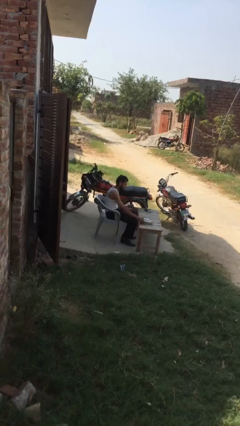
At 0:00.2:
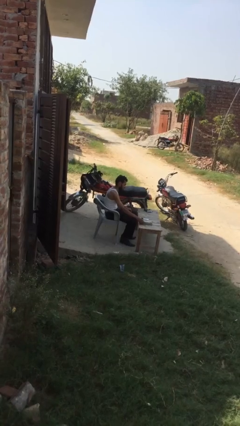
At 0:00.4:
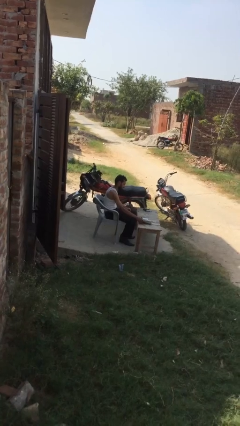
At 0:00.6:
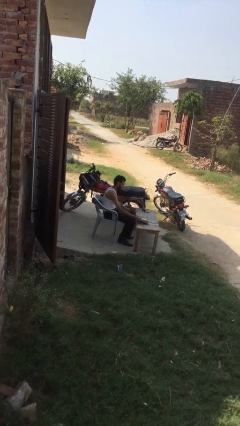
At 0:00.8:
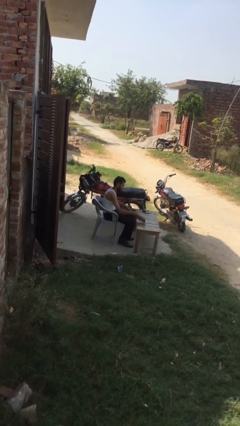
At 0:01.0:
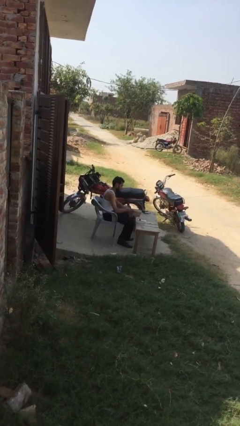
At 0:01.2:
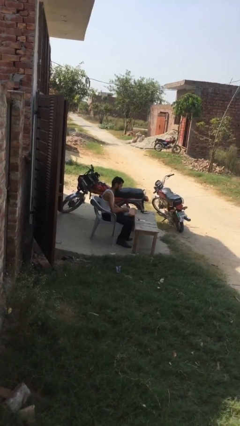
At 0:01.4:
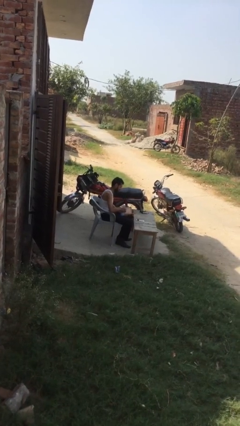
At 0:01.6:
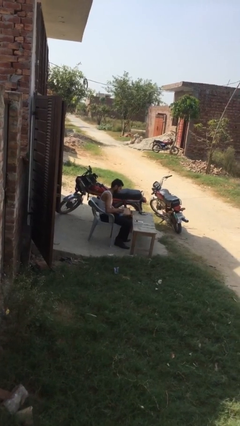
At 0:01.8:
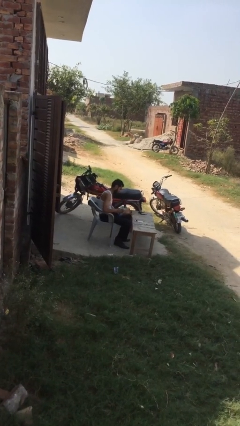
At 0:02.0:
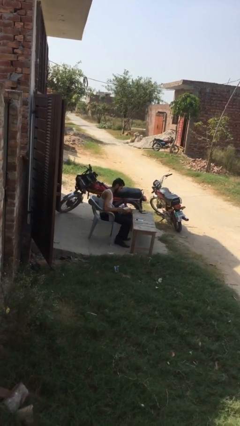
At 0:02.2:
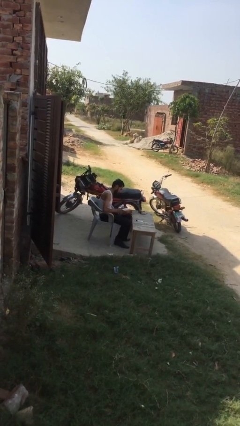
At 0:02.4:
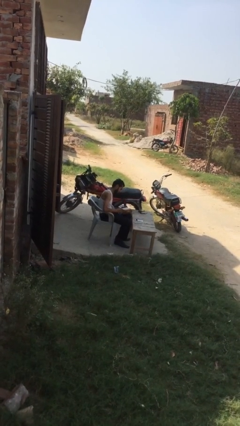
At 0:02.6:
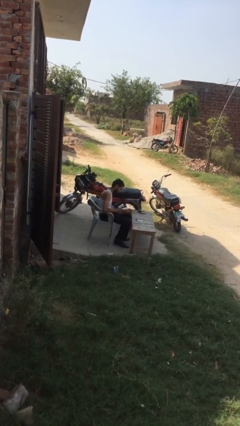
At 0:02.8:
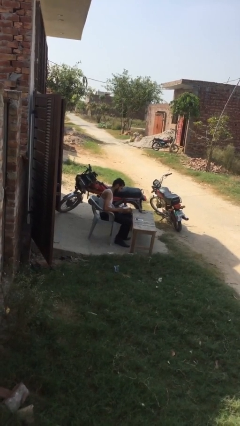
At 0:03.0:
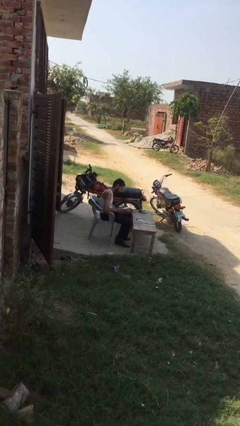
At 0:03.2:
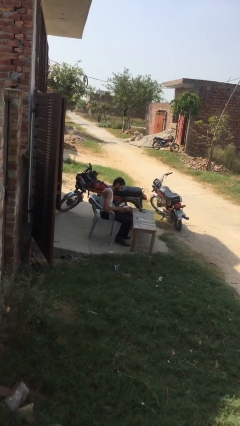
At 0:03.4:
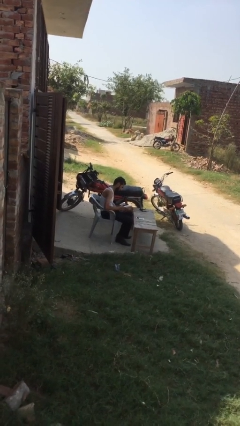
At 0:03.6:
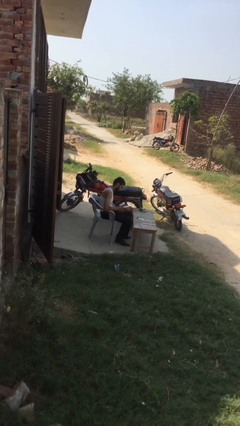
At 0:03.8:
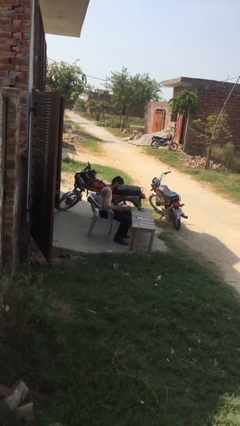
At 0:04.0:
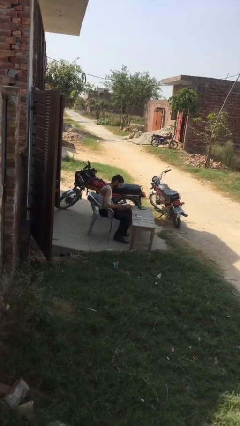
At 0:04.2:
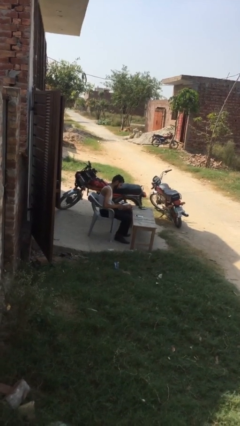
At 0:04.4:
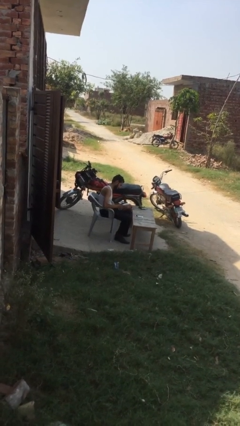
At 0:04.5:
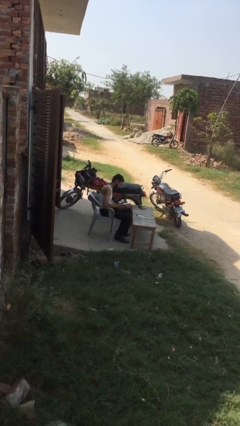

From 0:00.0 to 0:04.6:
person reads document

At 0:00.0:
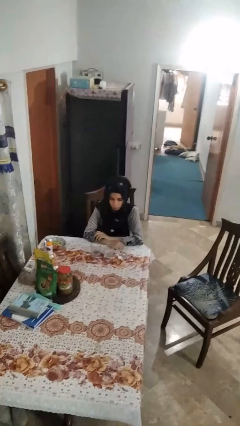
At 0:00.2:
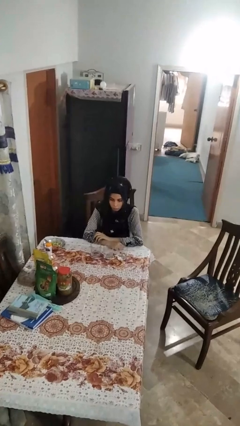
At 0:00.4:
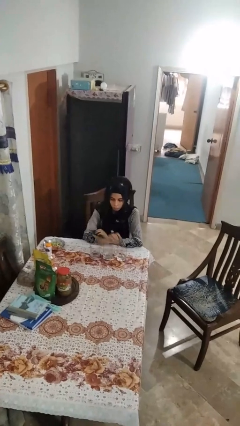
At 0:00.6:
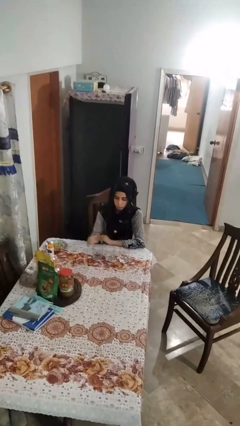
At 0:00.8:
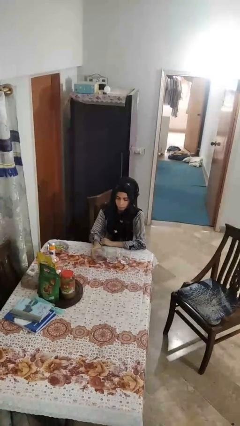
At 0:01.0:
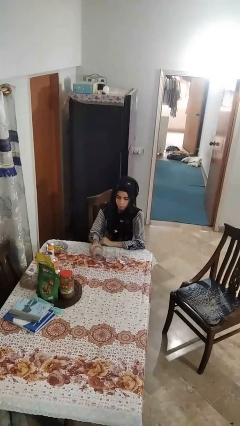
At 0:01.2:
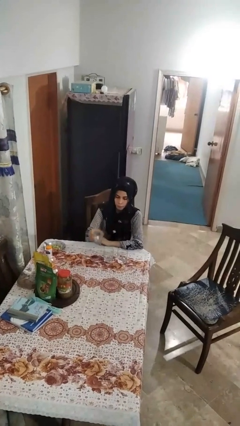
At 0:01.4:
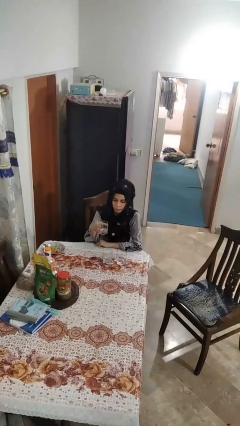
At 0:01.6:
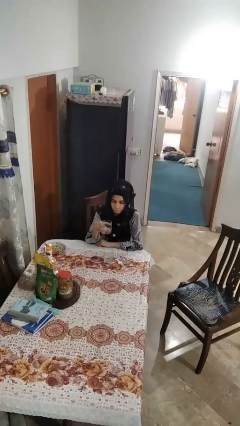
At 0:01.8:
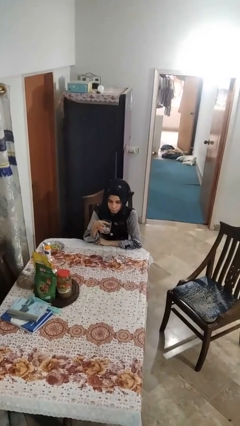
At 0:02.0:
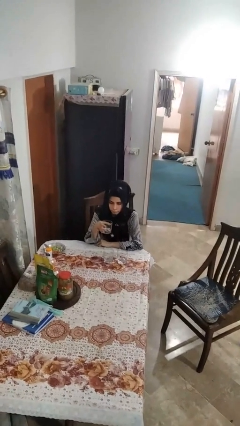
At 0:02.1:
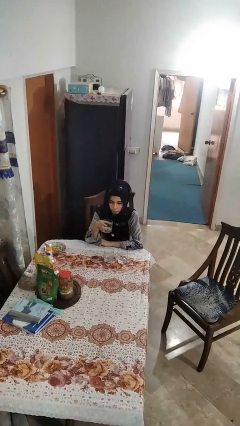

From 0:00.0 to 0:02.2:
person picks up object from table

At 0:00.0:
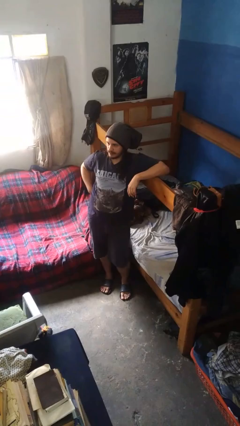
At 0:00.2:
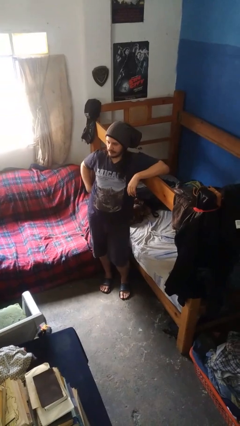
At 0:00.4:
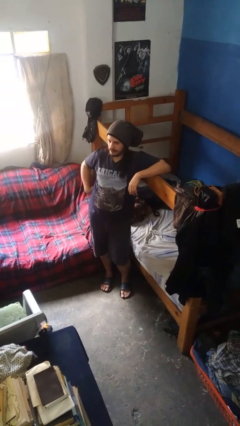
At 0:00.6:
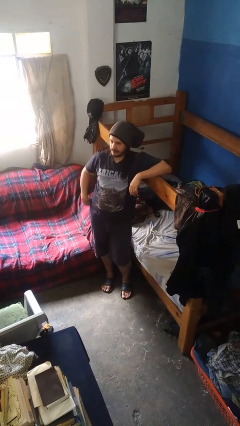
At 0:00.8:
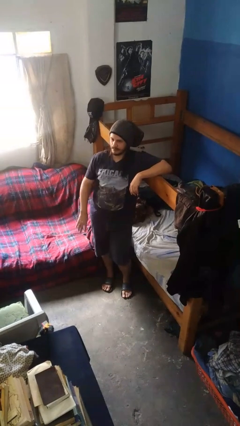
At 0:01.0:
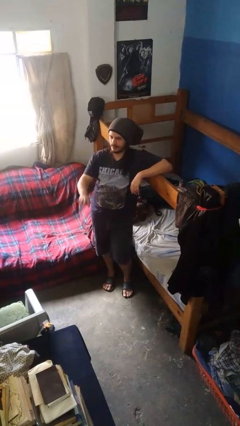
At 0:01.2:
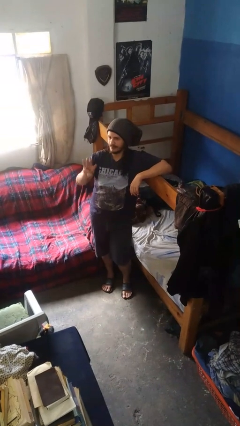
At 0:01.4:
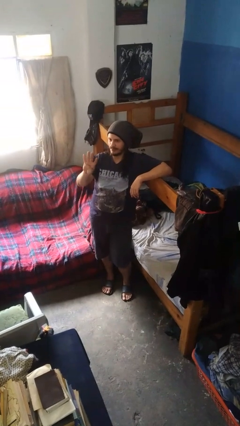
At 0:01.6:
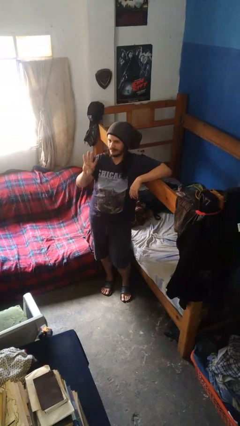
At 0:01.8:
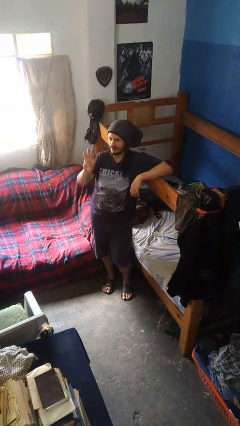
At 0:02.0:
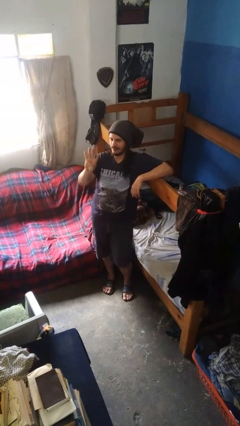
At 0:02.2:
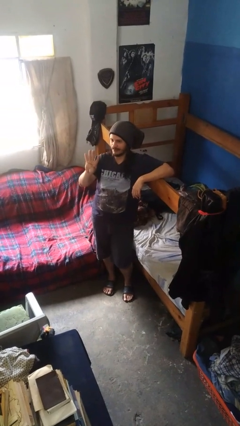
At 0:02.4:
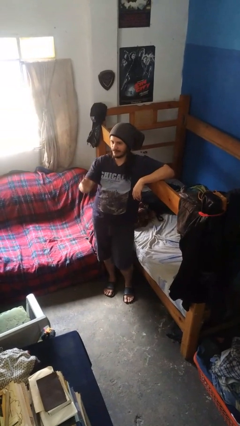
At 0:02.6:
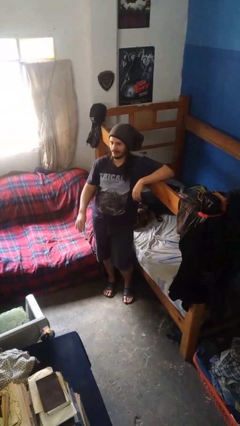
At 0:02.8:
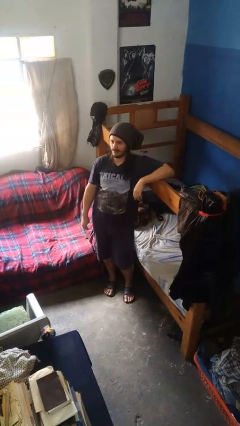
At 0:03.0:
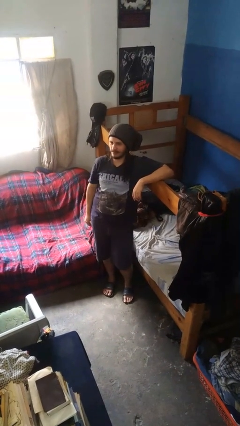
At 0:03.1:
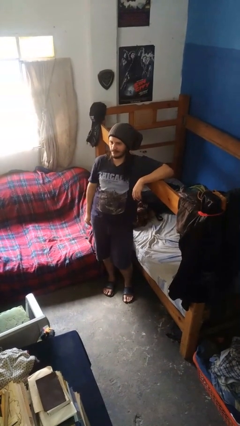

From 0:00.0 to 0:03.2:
person gestures number four

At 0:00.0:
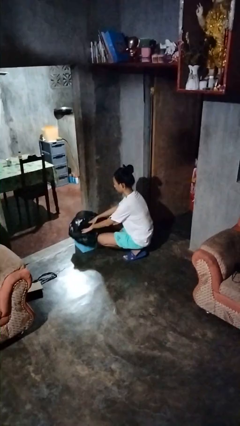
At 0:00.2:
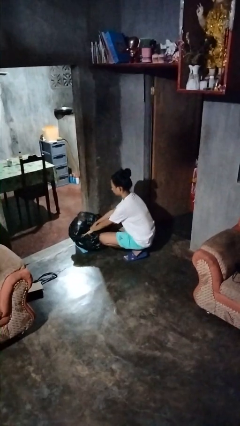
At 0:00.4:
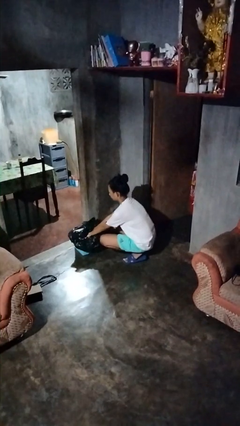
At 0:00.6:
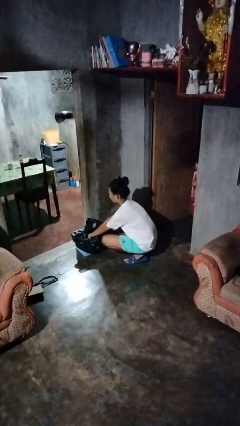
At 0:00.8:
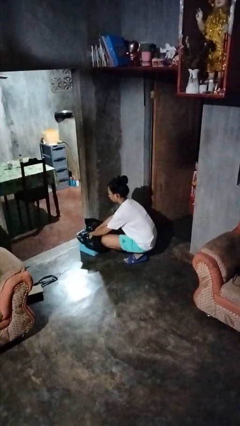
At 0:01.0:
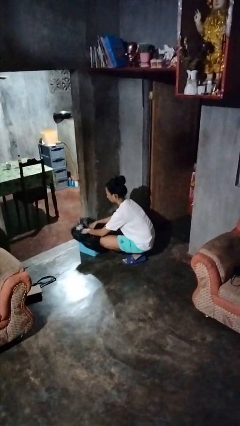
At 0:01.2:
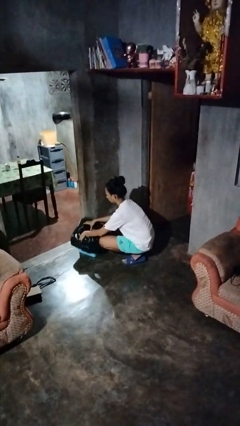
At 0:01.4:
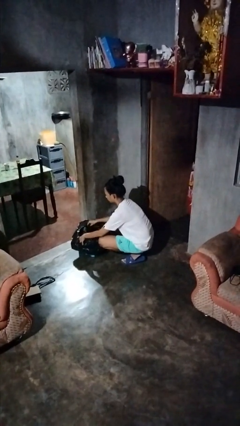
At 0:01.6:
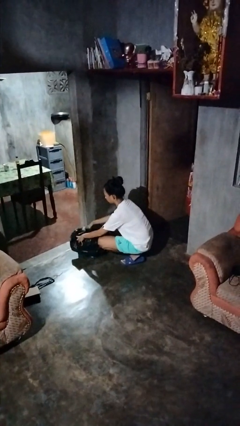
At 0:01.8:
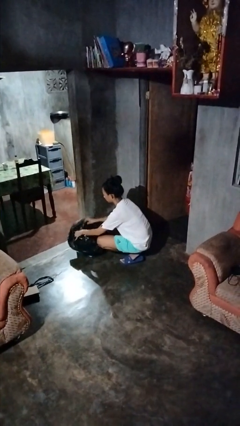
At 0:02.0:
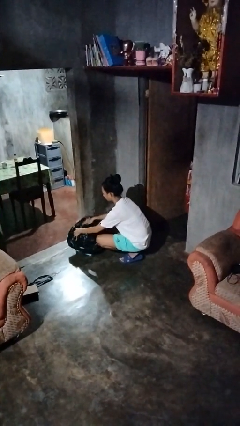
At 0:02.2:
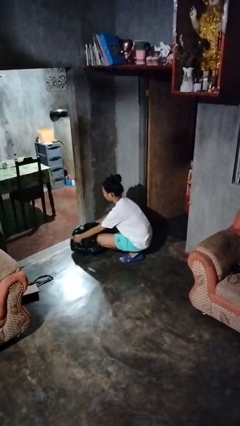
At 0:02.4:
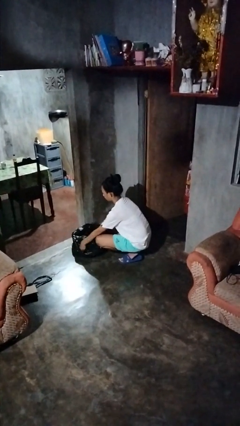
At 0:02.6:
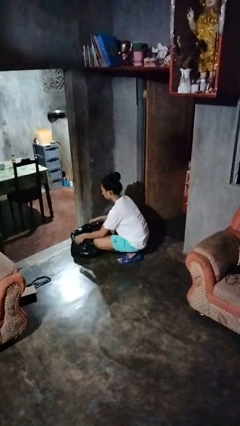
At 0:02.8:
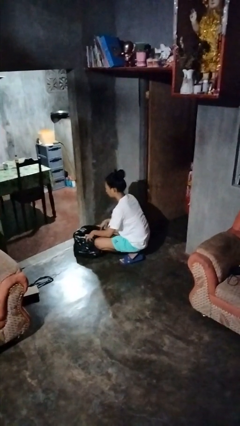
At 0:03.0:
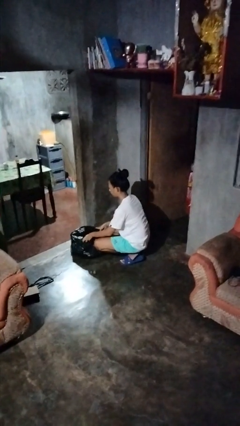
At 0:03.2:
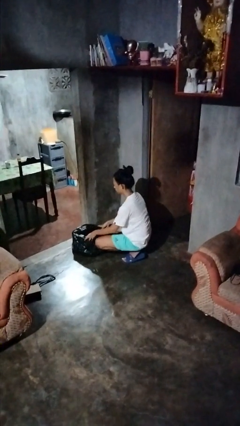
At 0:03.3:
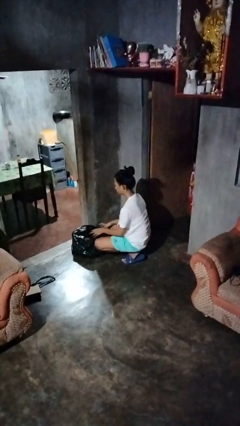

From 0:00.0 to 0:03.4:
person inserts trashbag into trashcan

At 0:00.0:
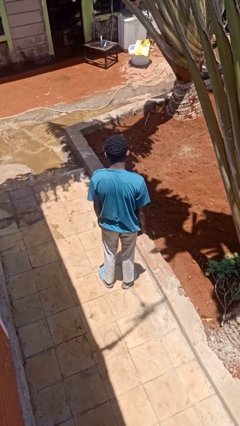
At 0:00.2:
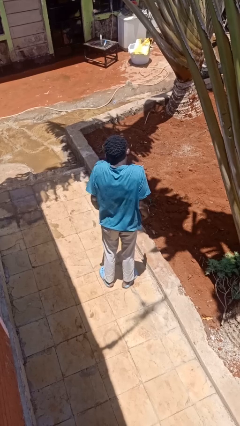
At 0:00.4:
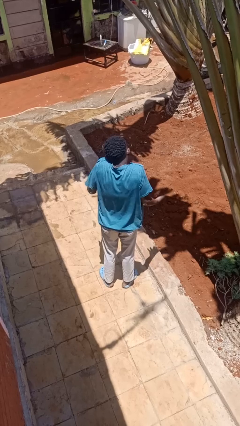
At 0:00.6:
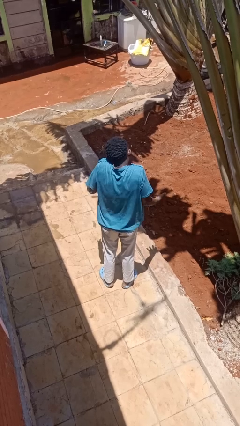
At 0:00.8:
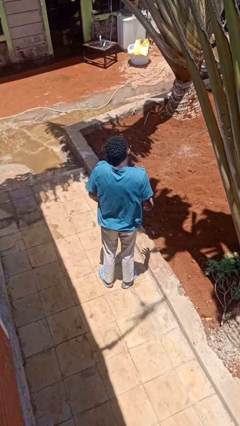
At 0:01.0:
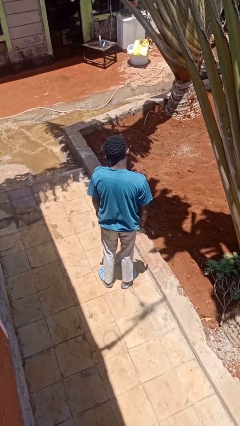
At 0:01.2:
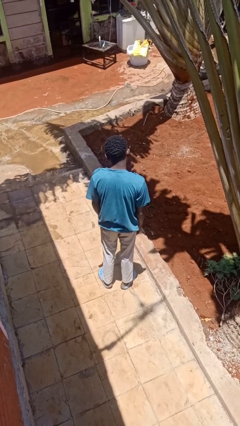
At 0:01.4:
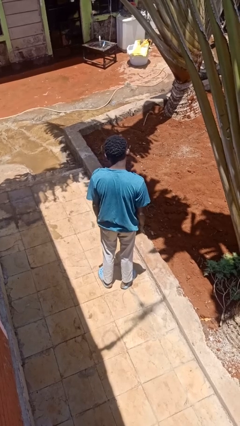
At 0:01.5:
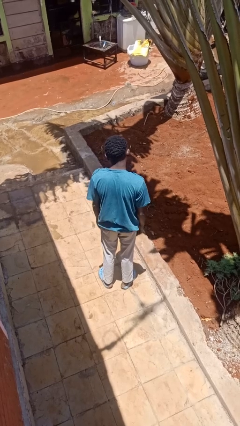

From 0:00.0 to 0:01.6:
person shrugs

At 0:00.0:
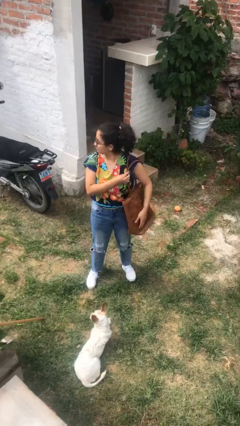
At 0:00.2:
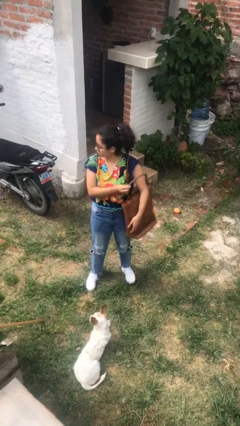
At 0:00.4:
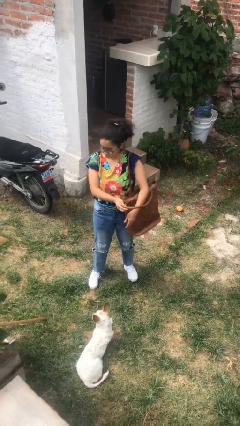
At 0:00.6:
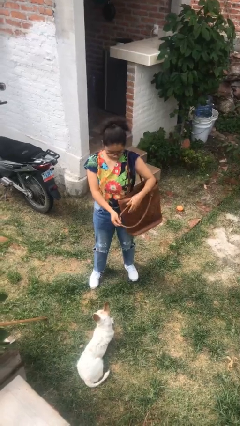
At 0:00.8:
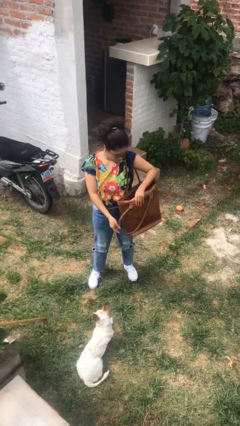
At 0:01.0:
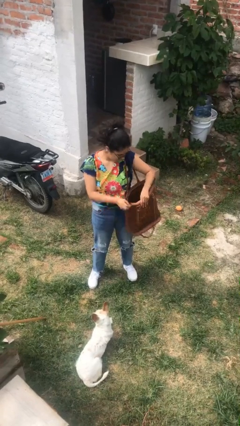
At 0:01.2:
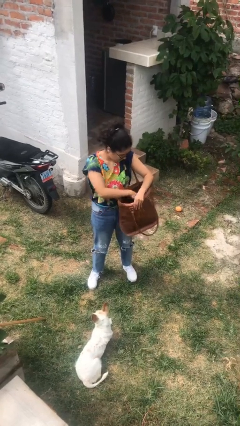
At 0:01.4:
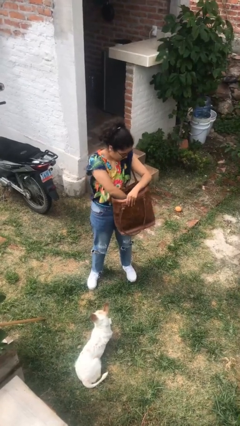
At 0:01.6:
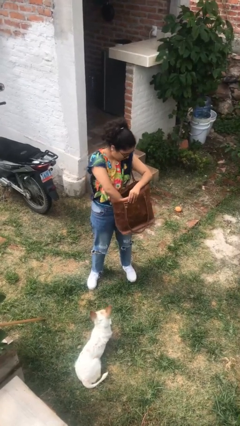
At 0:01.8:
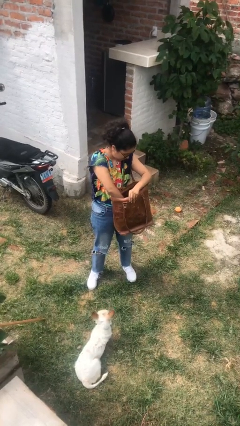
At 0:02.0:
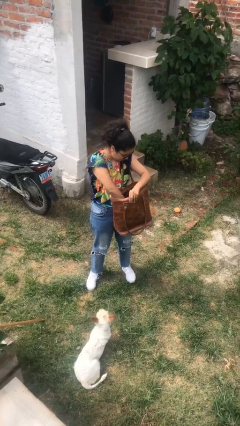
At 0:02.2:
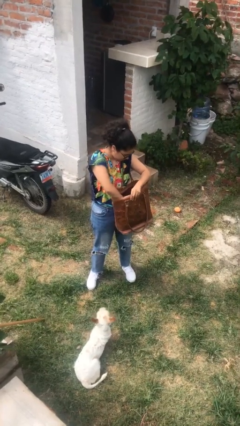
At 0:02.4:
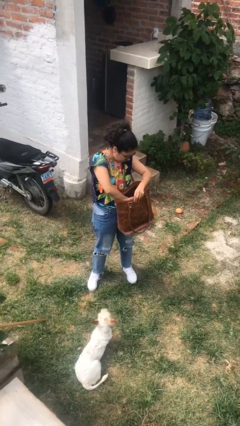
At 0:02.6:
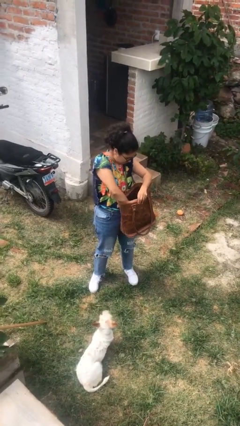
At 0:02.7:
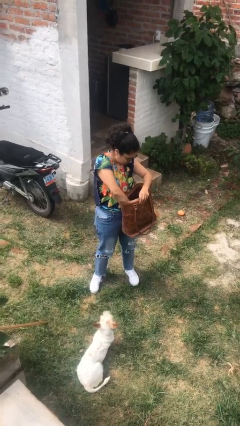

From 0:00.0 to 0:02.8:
person searches in purse
